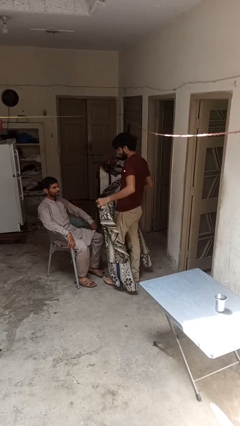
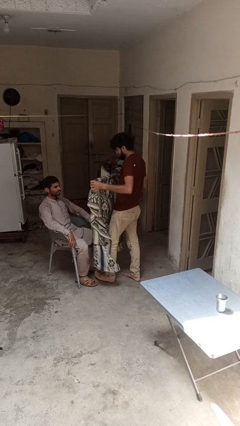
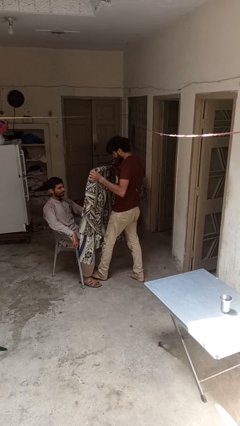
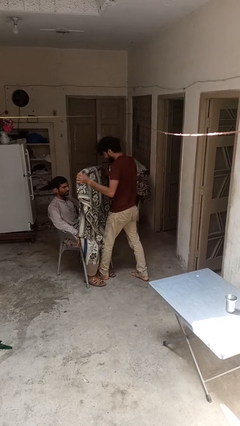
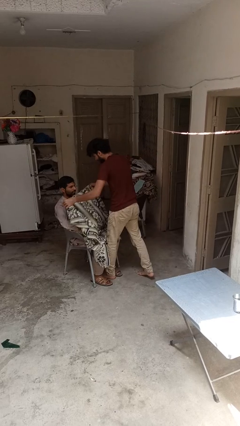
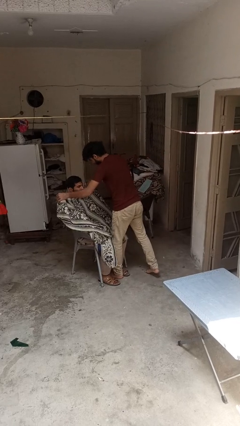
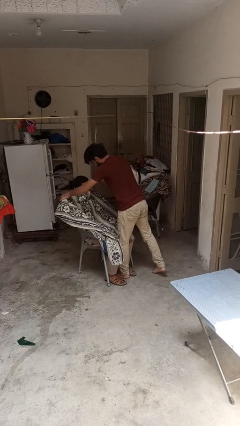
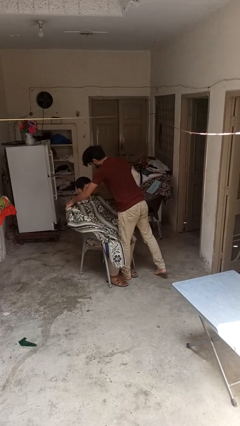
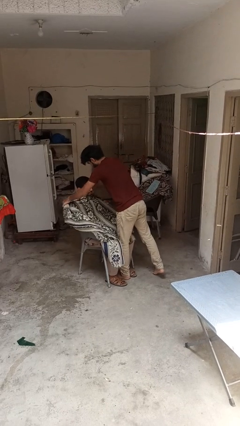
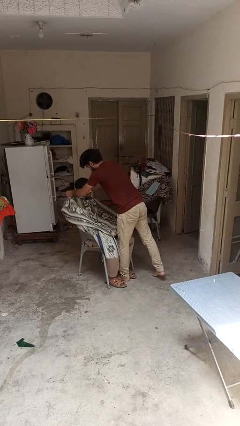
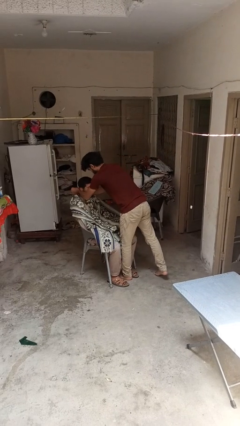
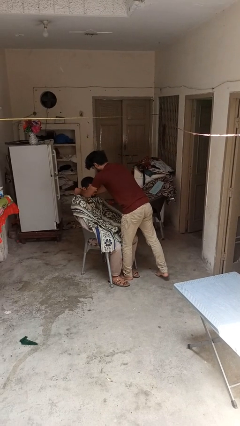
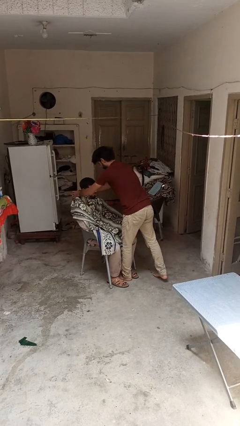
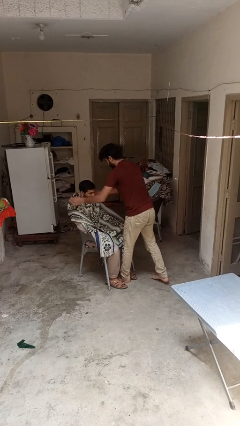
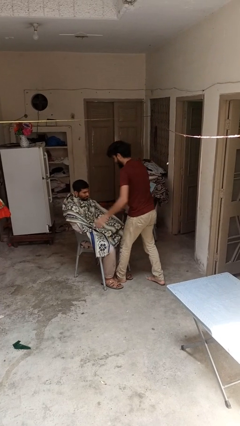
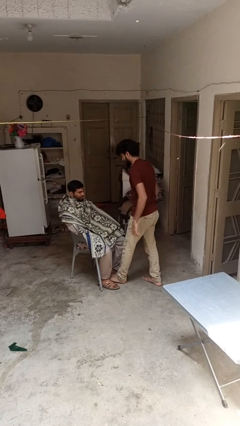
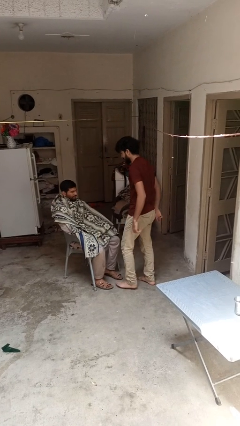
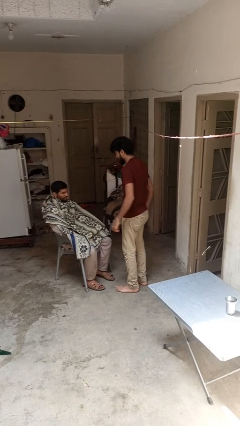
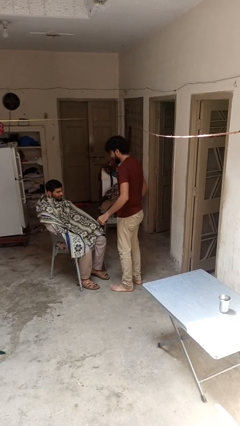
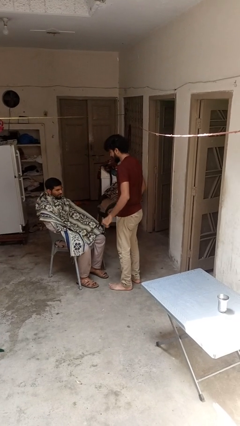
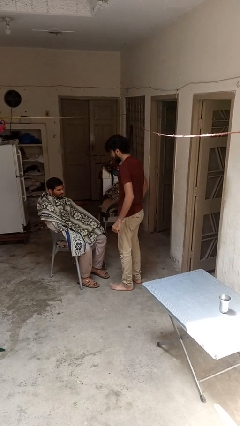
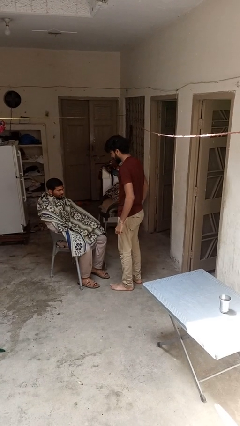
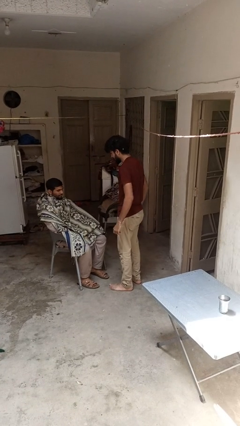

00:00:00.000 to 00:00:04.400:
person covers friend with blanket

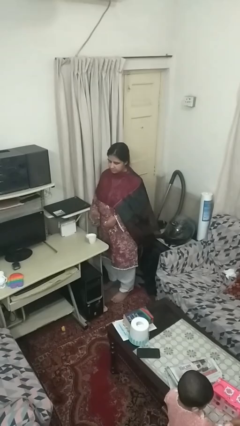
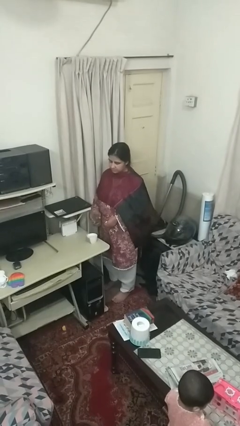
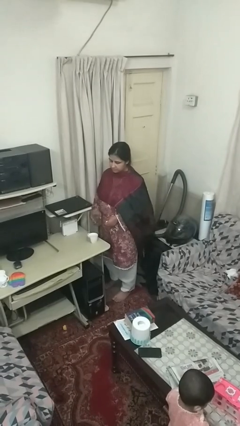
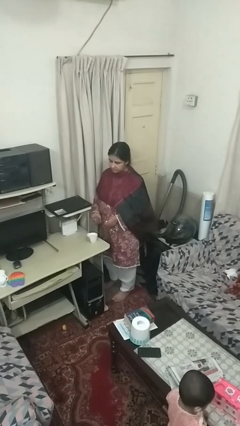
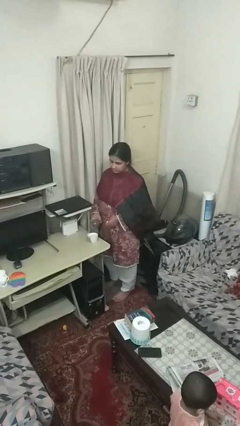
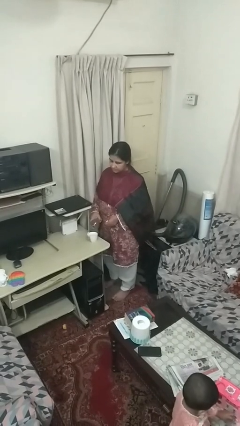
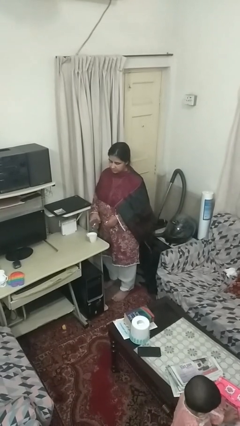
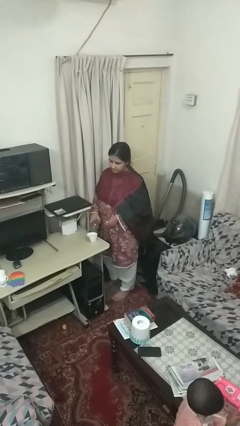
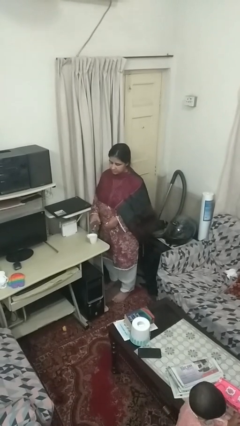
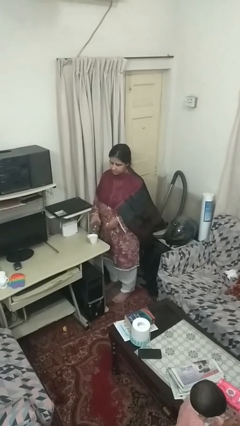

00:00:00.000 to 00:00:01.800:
person pours liquid into cup

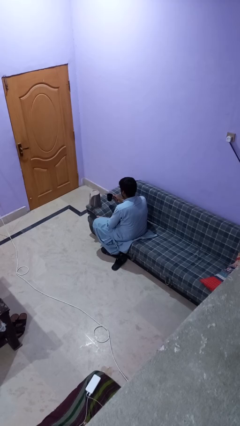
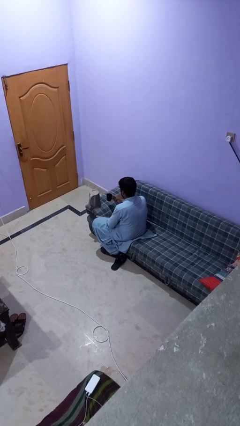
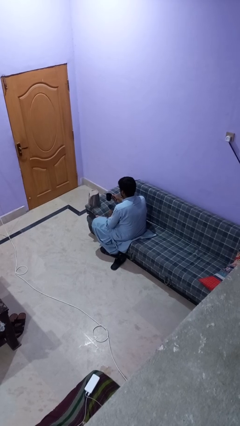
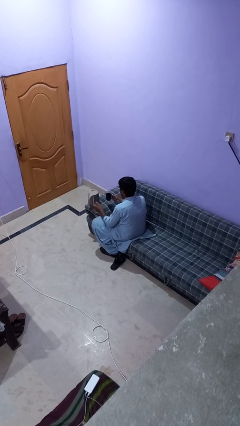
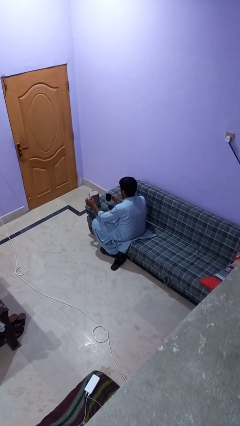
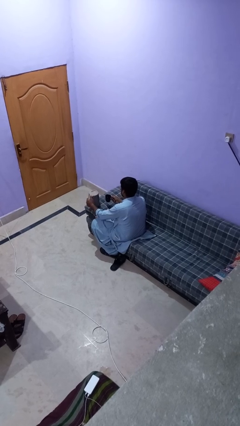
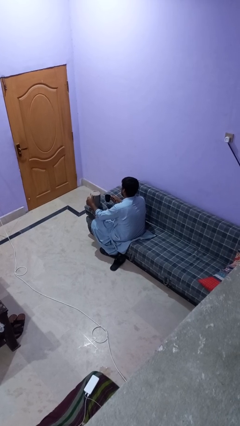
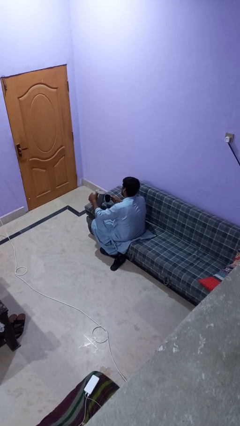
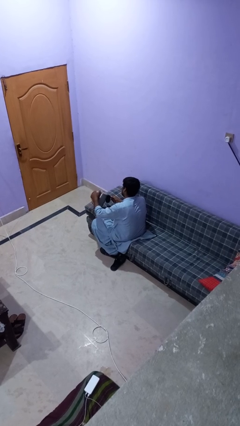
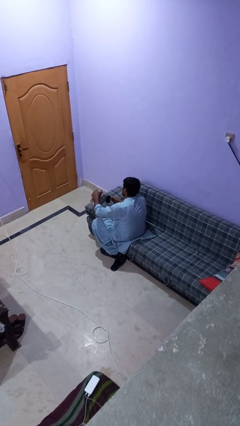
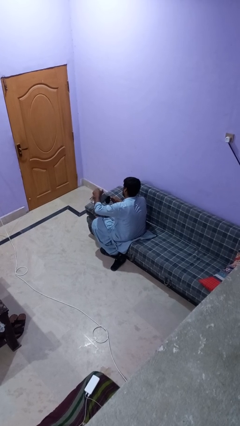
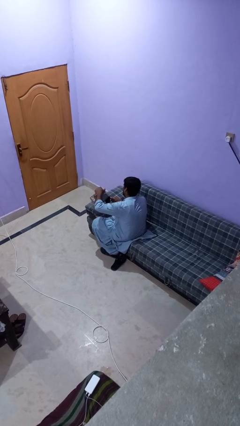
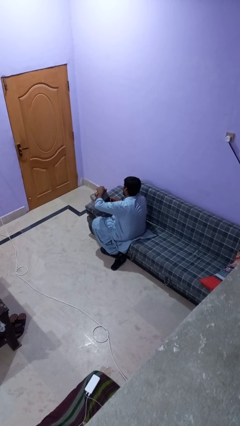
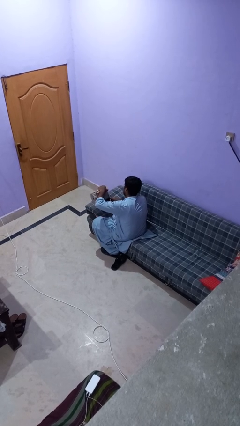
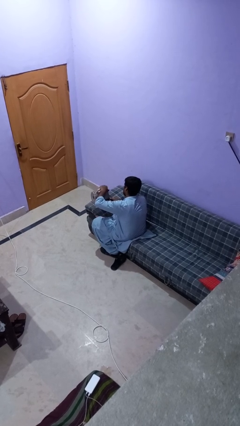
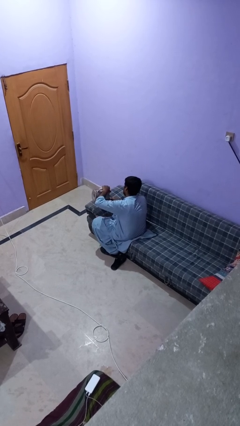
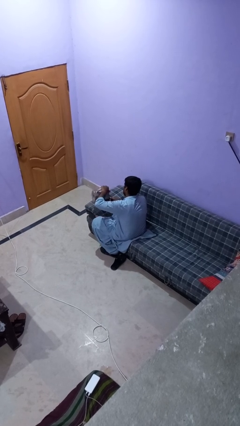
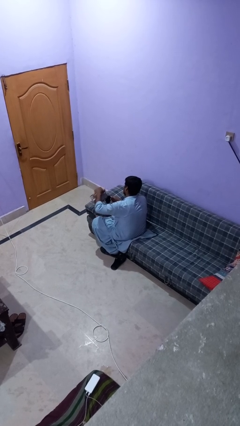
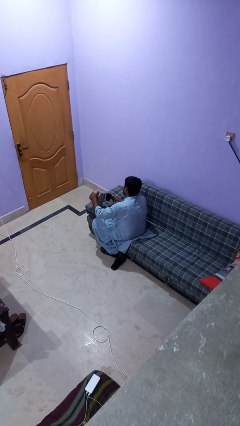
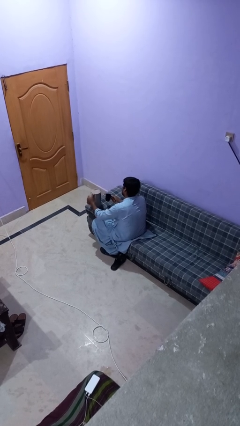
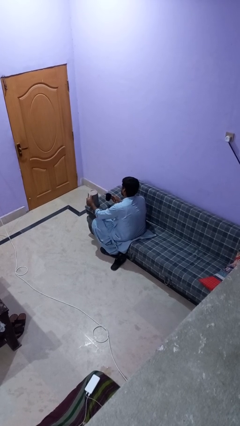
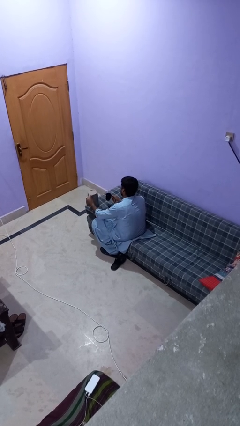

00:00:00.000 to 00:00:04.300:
person pours coffee into mug

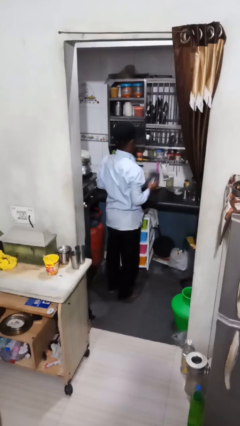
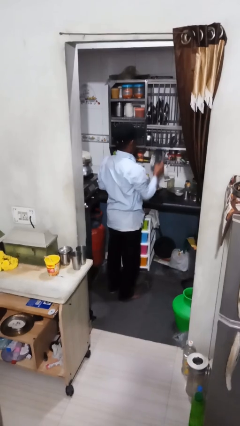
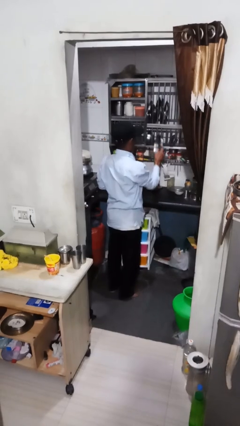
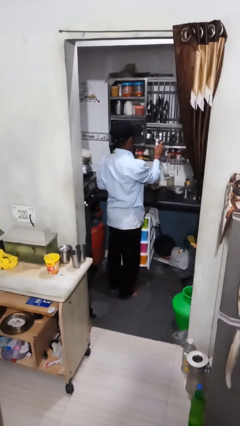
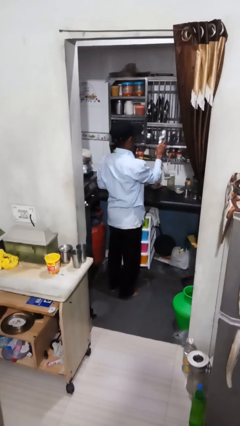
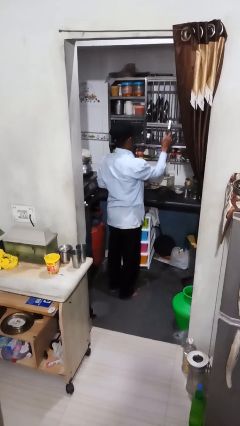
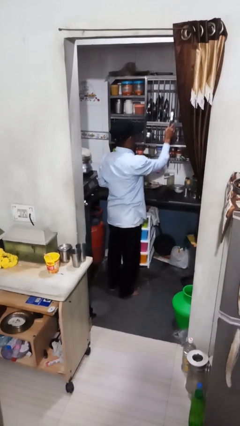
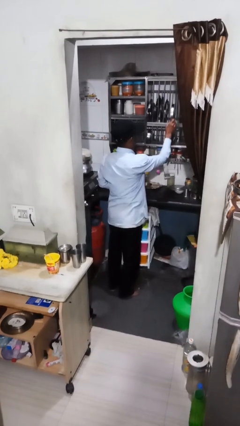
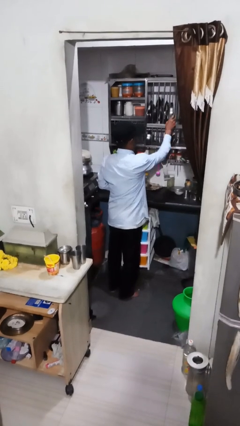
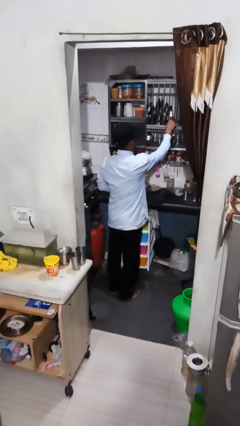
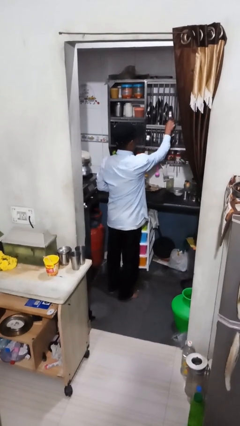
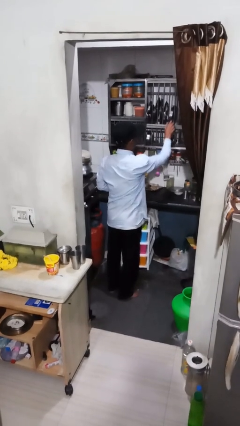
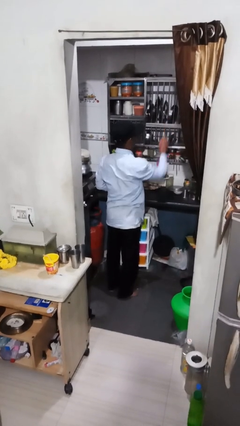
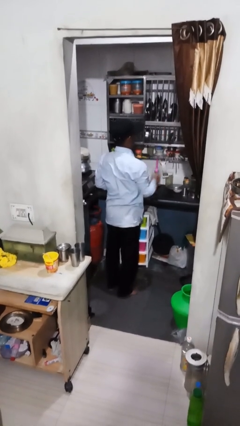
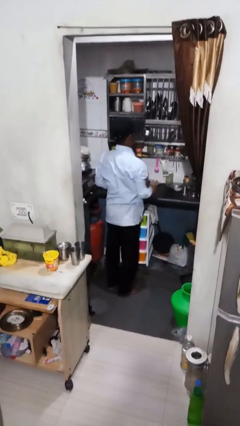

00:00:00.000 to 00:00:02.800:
person puts object in cabinet

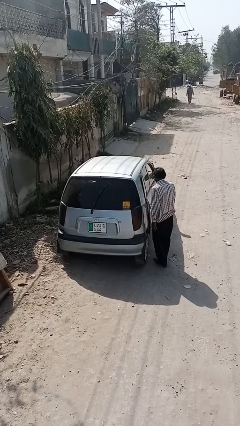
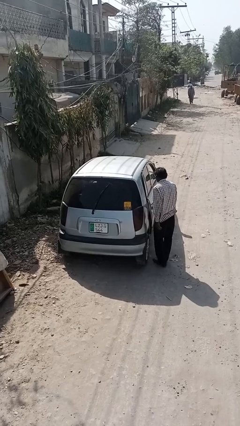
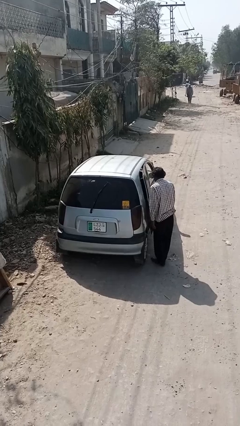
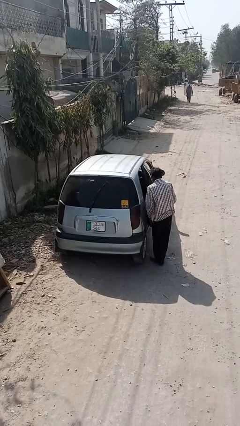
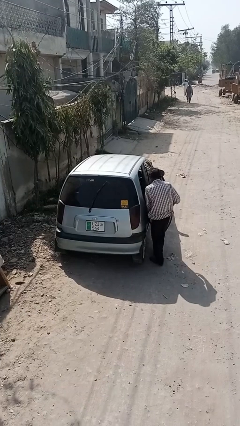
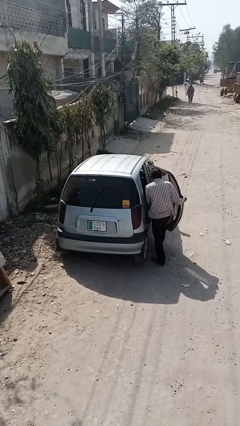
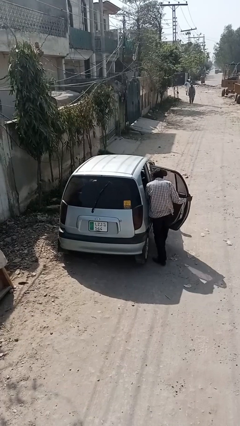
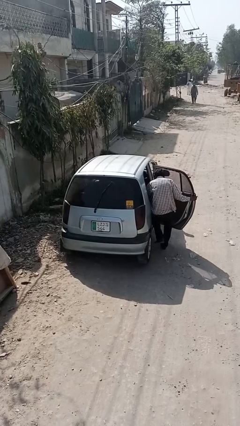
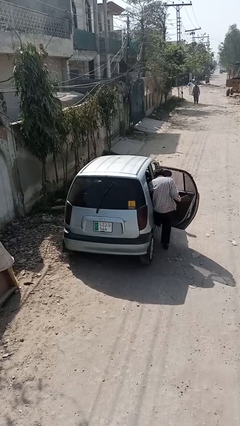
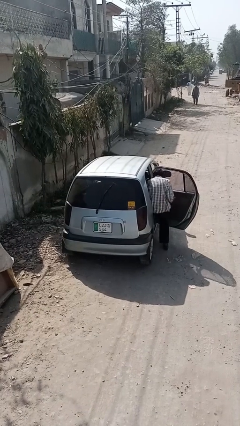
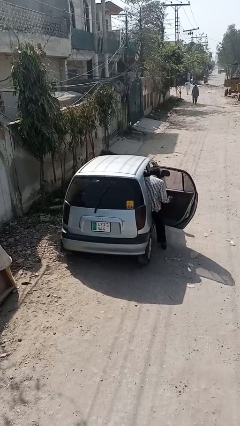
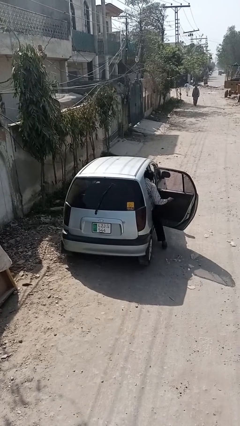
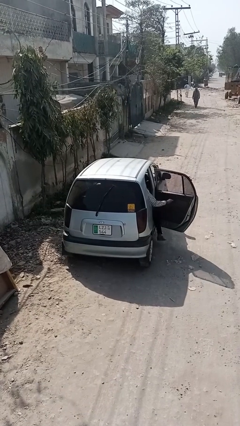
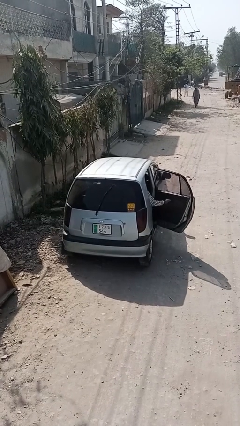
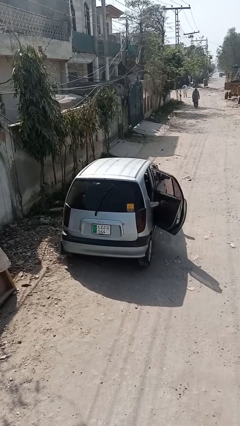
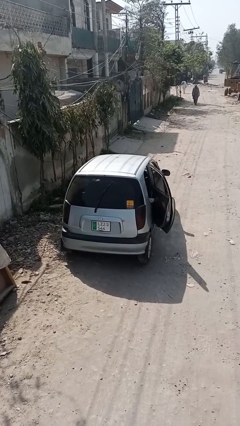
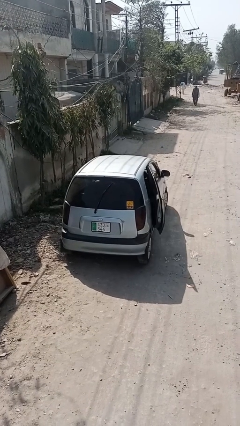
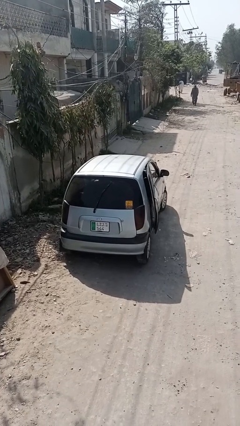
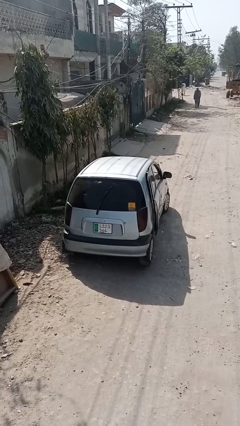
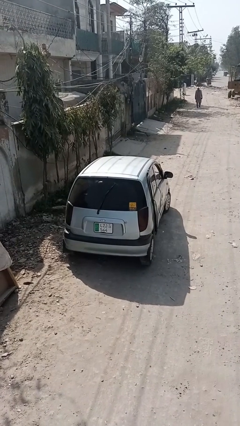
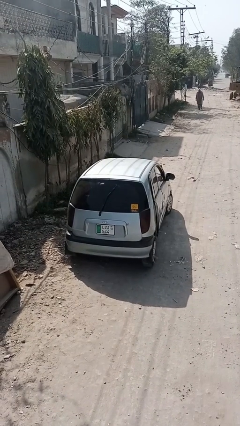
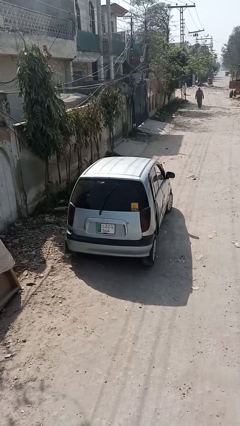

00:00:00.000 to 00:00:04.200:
car picks up person
